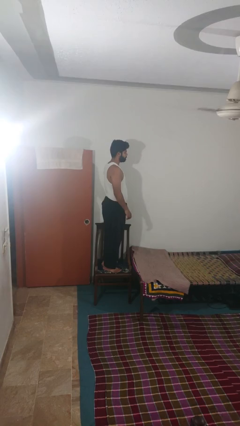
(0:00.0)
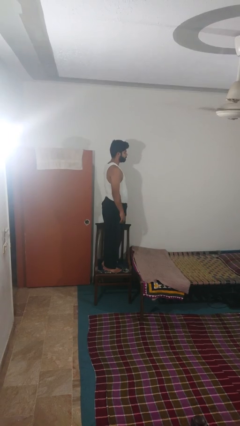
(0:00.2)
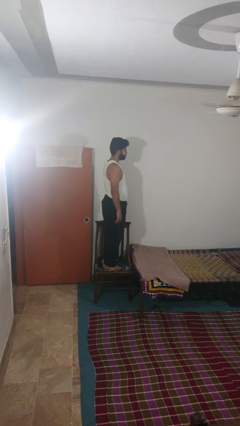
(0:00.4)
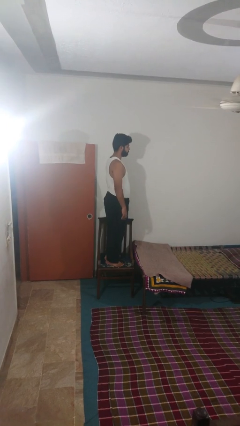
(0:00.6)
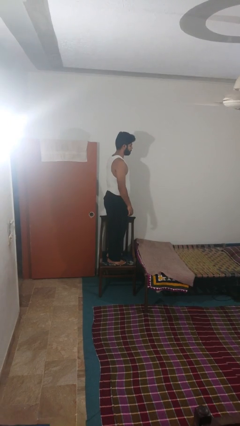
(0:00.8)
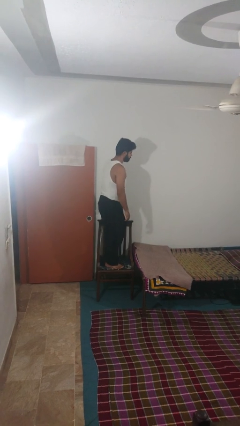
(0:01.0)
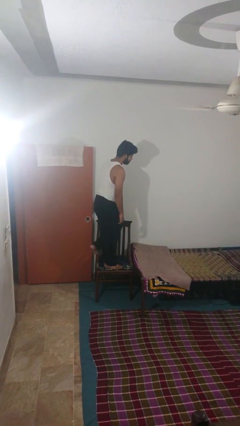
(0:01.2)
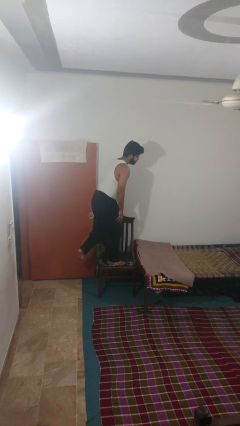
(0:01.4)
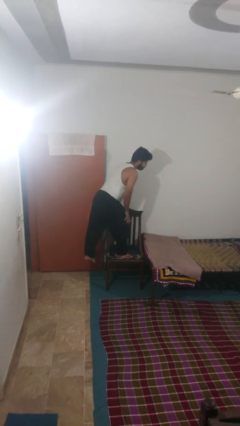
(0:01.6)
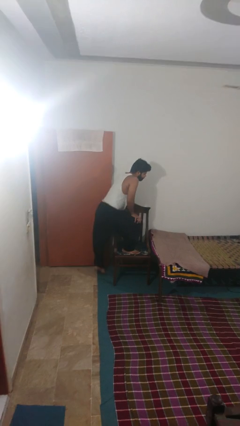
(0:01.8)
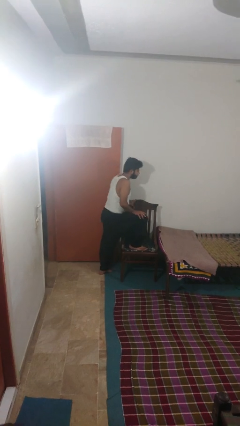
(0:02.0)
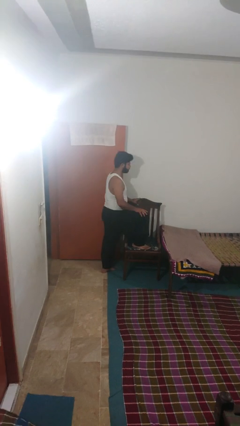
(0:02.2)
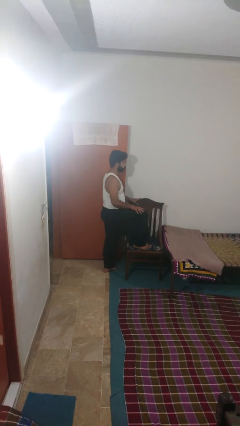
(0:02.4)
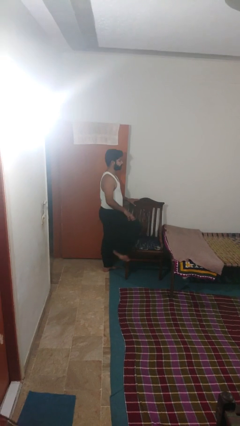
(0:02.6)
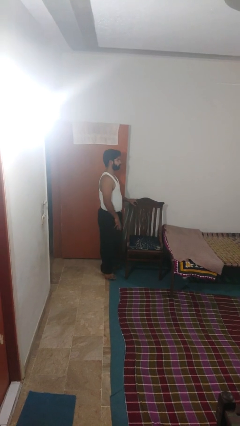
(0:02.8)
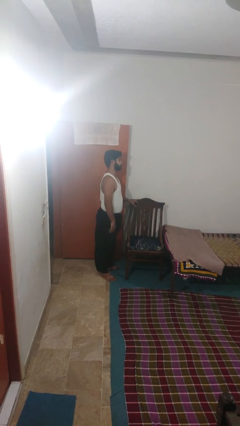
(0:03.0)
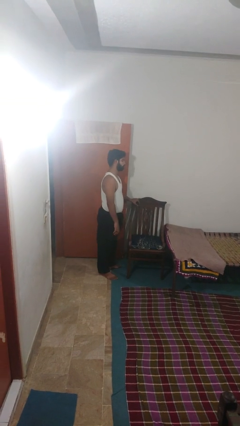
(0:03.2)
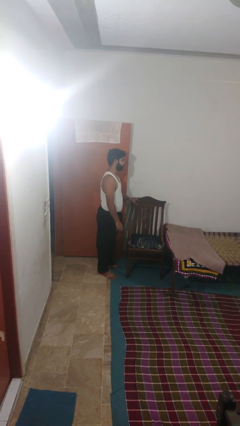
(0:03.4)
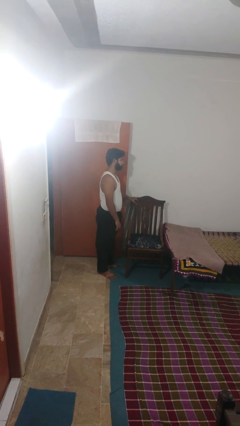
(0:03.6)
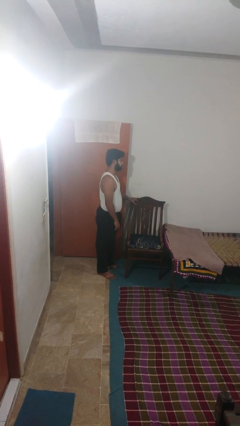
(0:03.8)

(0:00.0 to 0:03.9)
person climbs off chair

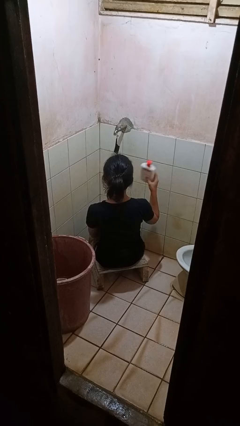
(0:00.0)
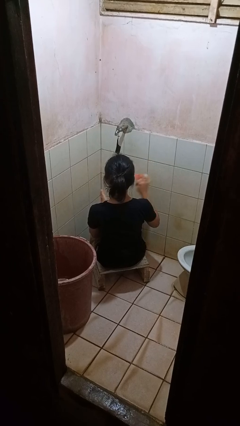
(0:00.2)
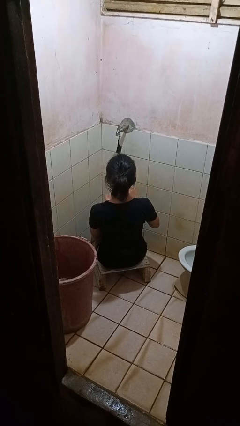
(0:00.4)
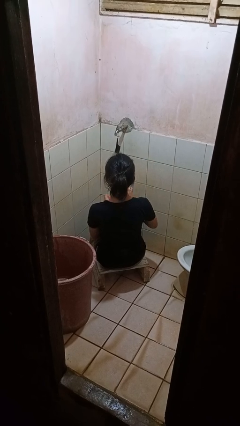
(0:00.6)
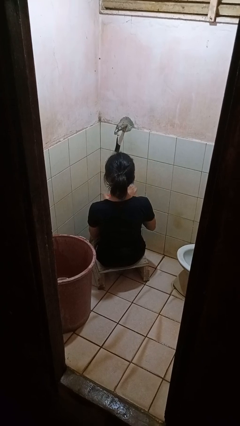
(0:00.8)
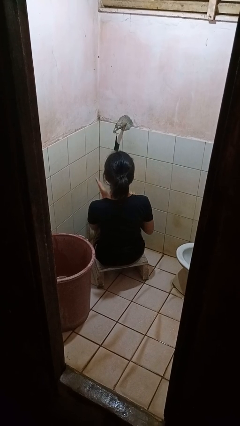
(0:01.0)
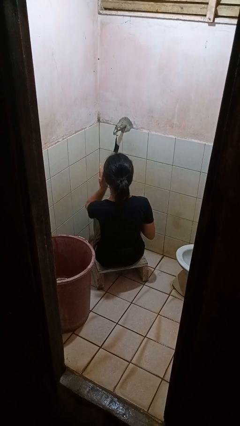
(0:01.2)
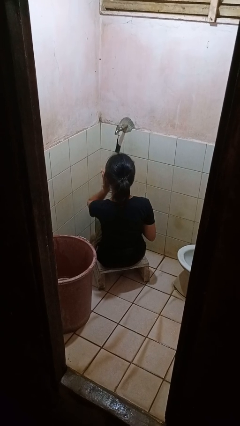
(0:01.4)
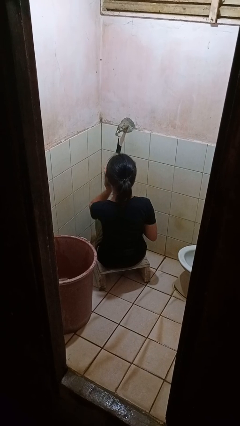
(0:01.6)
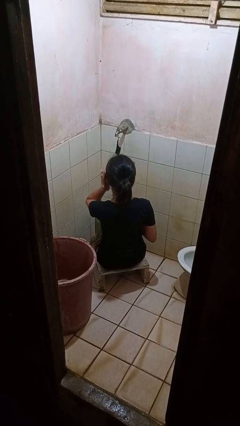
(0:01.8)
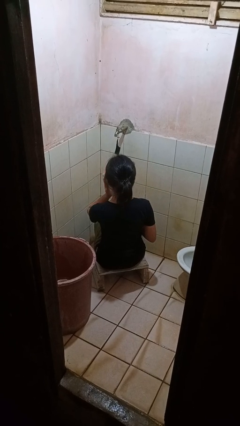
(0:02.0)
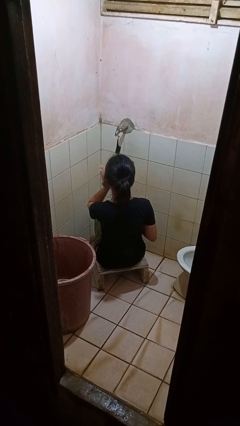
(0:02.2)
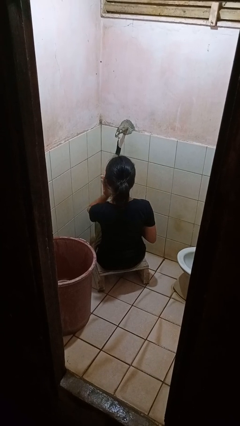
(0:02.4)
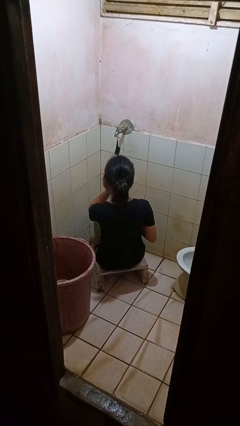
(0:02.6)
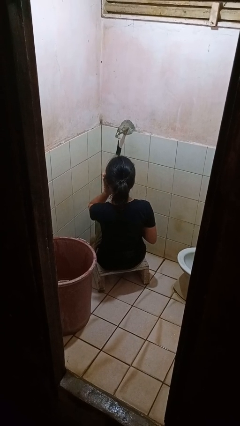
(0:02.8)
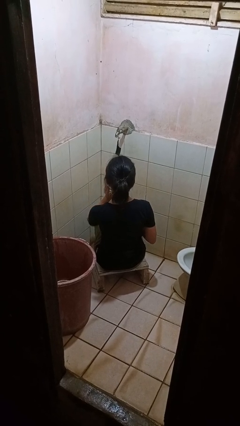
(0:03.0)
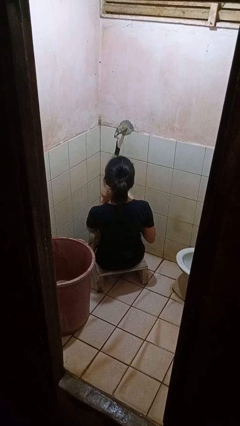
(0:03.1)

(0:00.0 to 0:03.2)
person applies facial moisturizer

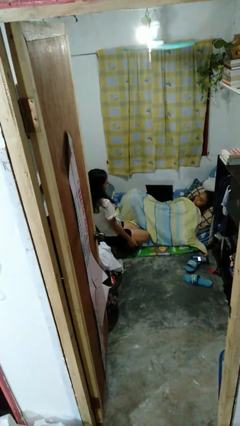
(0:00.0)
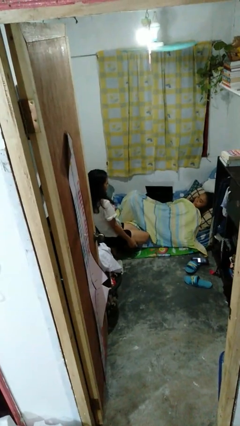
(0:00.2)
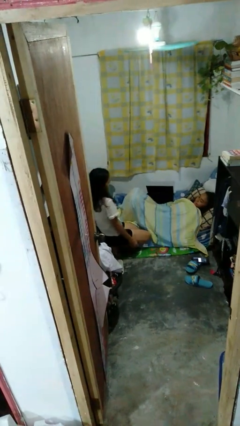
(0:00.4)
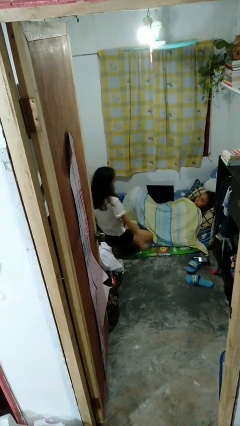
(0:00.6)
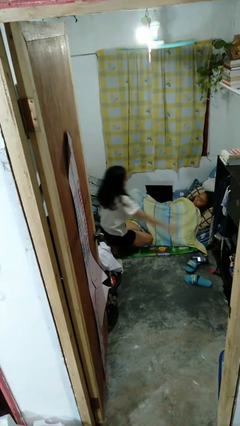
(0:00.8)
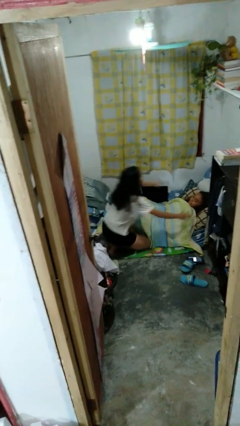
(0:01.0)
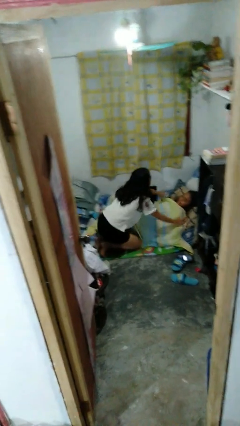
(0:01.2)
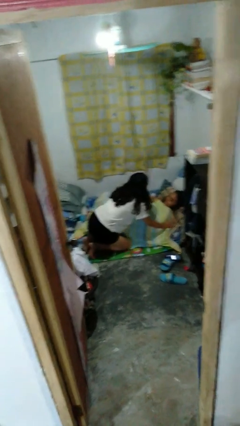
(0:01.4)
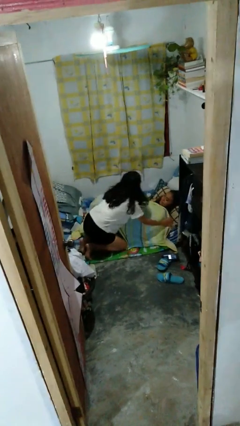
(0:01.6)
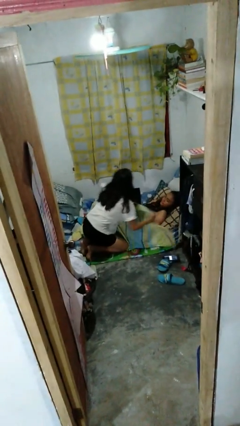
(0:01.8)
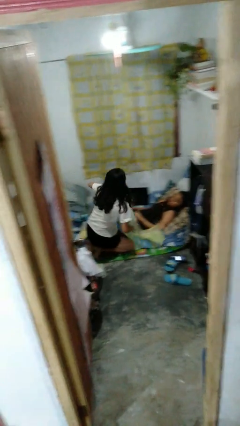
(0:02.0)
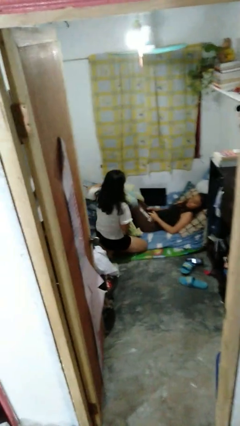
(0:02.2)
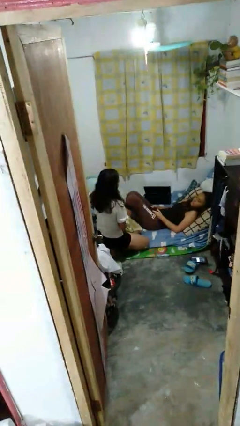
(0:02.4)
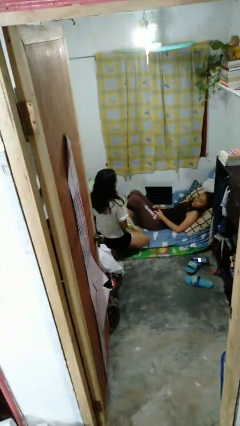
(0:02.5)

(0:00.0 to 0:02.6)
person uncovers friend with blanket

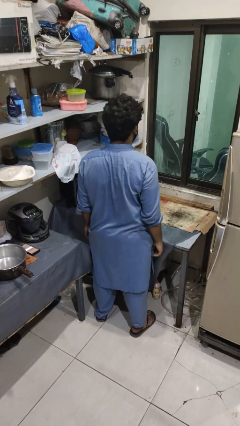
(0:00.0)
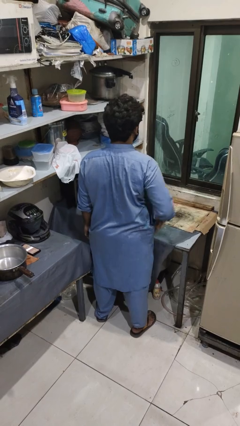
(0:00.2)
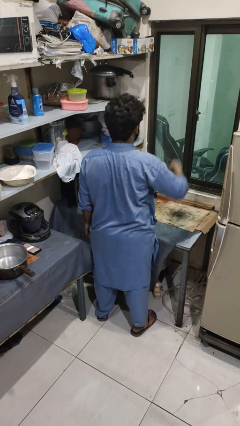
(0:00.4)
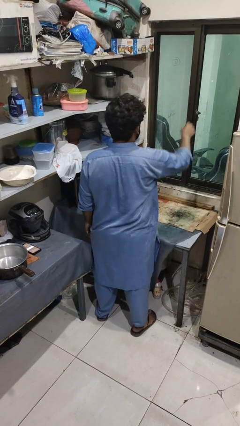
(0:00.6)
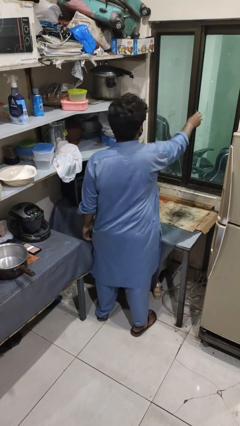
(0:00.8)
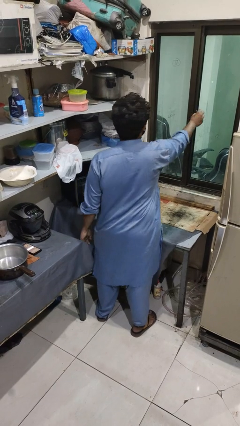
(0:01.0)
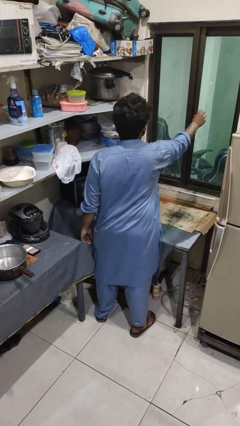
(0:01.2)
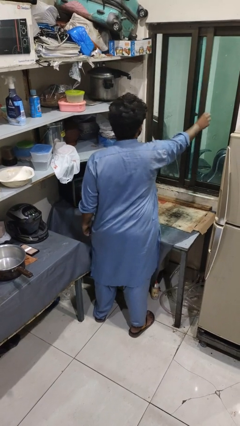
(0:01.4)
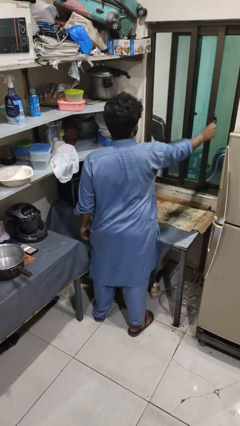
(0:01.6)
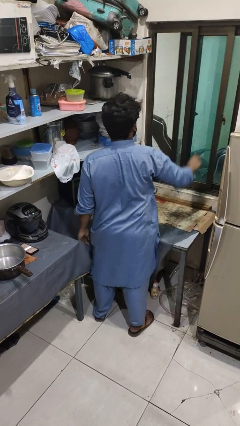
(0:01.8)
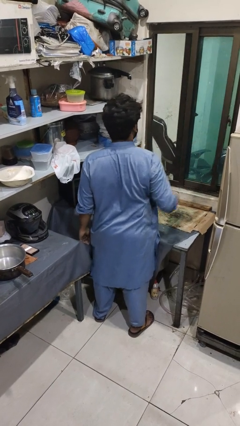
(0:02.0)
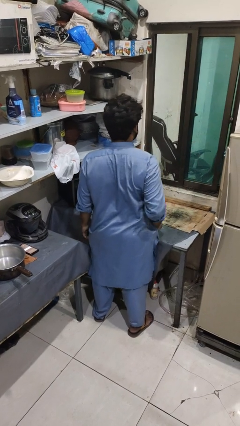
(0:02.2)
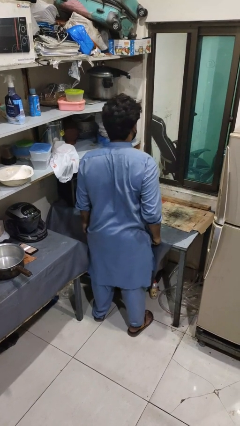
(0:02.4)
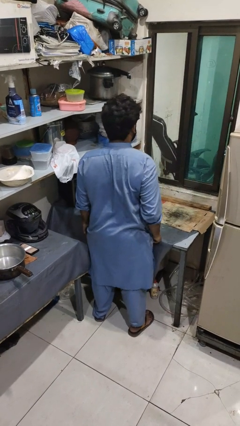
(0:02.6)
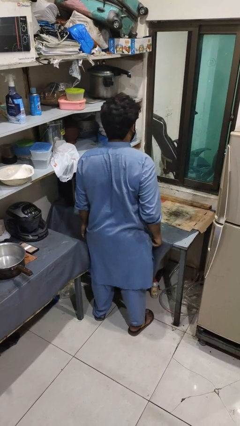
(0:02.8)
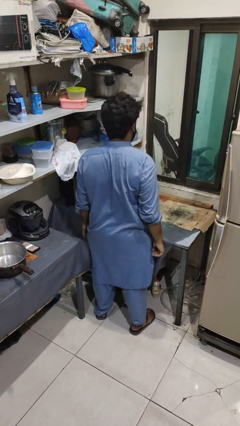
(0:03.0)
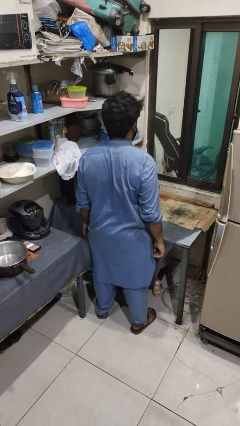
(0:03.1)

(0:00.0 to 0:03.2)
person opens home window

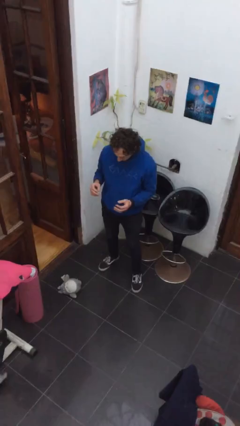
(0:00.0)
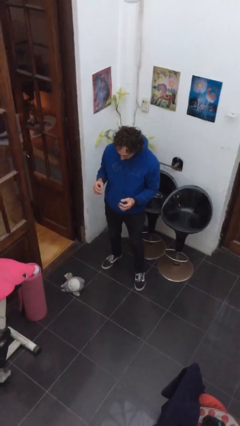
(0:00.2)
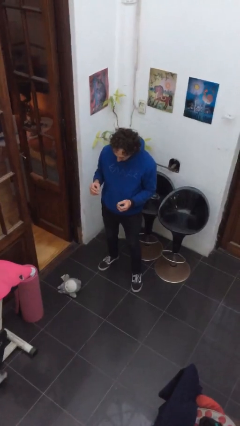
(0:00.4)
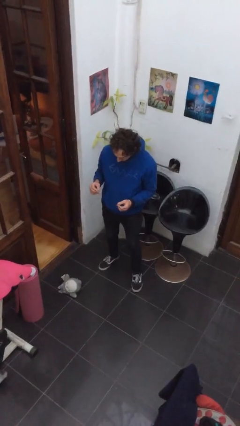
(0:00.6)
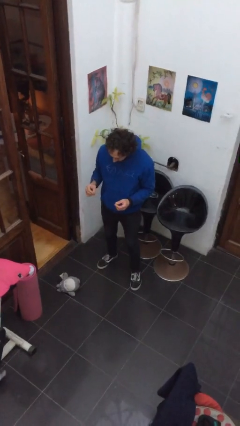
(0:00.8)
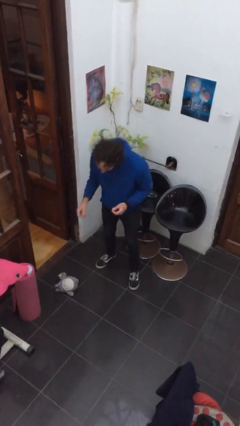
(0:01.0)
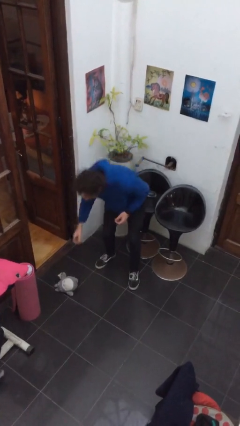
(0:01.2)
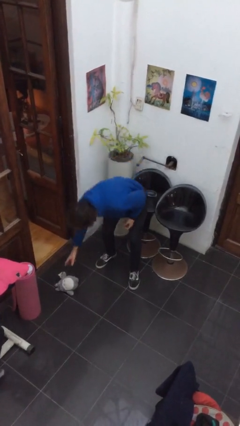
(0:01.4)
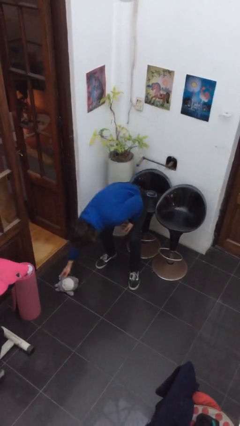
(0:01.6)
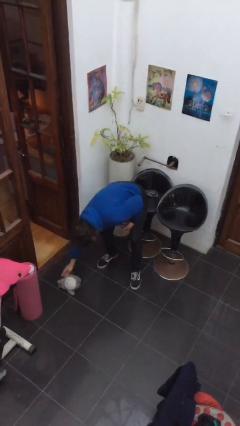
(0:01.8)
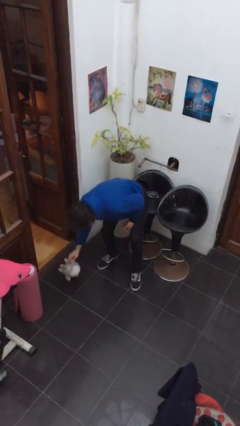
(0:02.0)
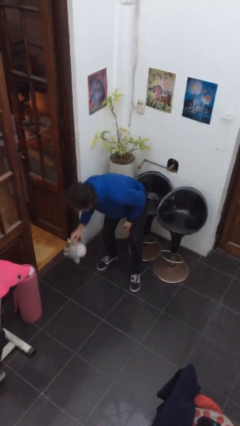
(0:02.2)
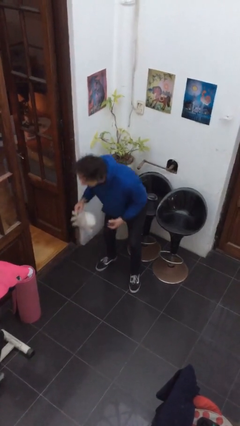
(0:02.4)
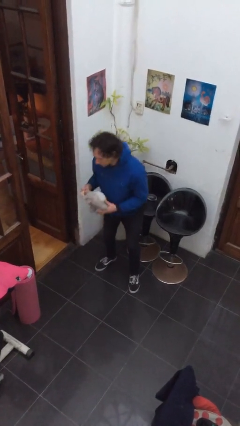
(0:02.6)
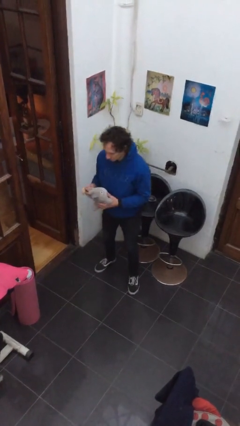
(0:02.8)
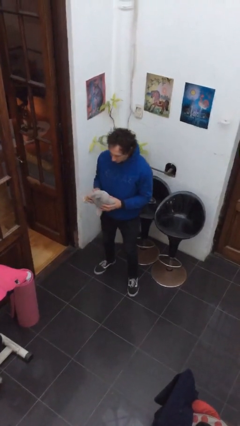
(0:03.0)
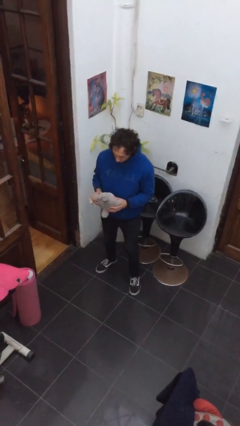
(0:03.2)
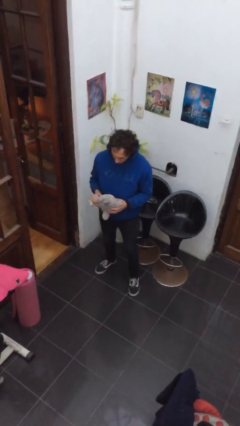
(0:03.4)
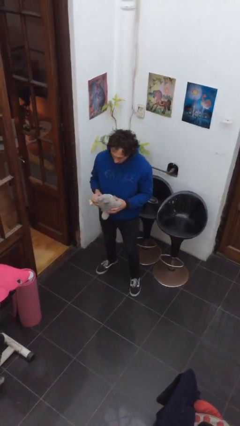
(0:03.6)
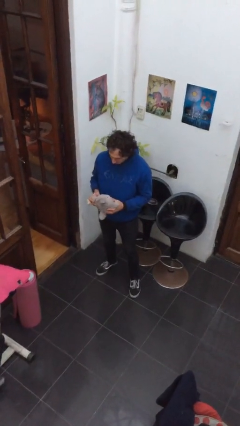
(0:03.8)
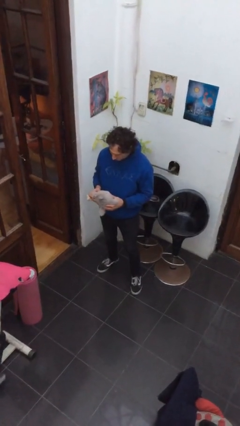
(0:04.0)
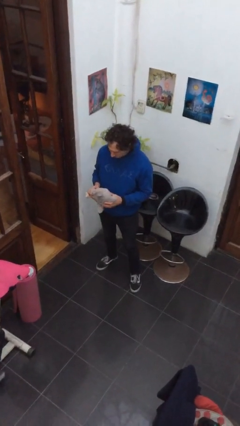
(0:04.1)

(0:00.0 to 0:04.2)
person picks up object from floor

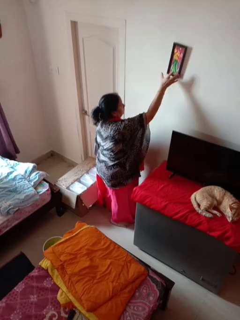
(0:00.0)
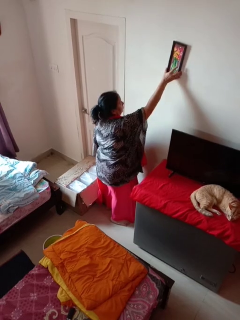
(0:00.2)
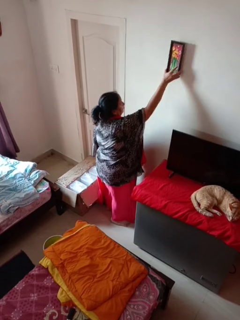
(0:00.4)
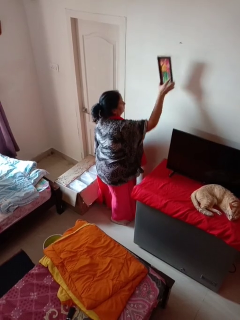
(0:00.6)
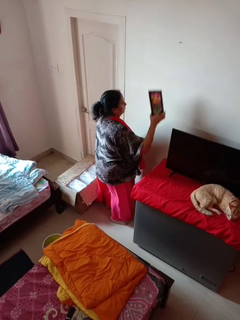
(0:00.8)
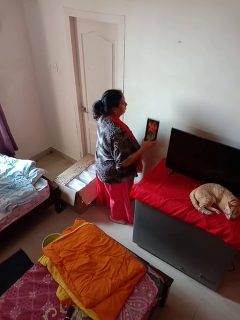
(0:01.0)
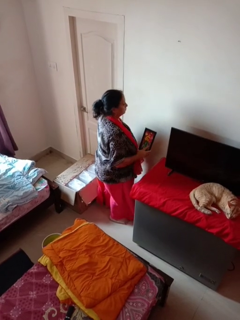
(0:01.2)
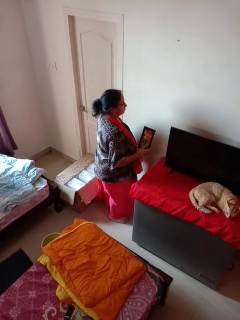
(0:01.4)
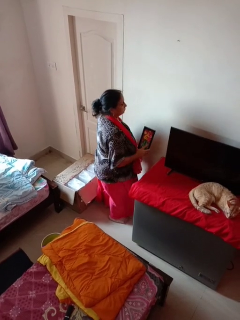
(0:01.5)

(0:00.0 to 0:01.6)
person takes down picture frame
